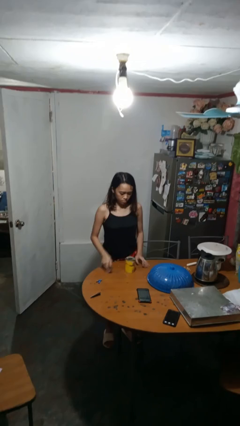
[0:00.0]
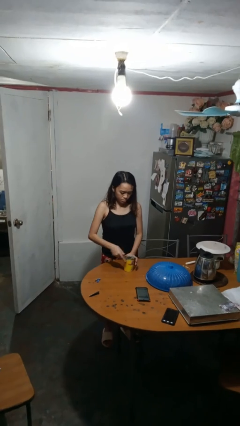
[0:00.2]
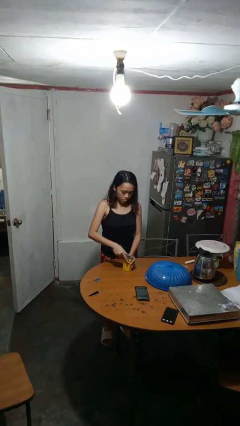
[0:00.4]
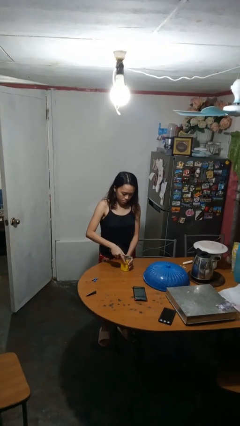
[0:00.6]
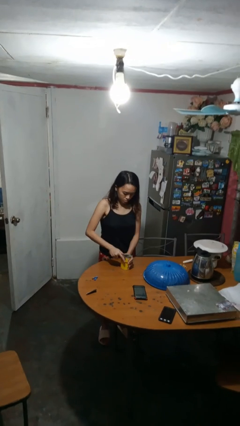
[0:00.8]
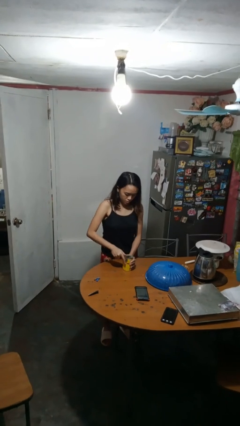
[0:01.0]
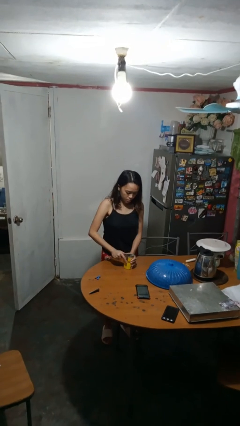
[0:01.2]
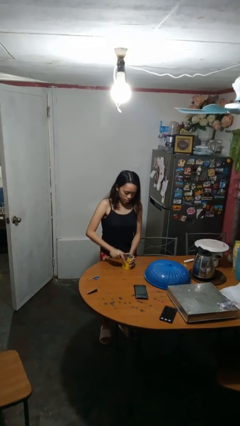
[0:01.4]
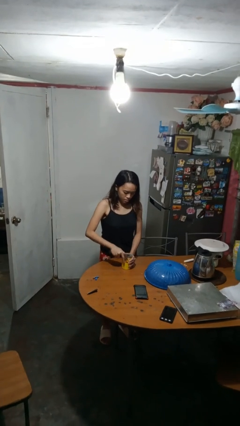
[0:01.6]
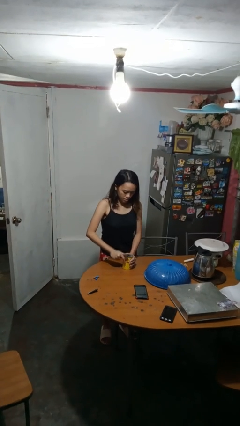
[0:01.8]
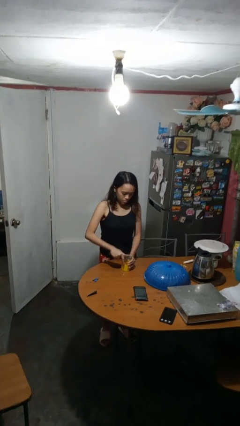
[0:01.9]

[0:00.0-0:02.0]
person opens can with can opener

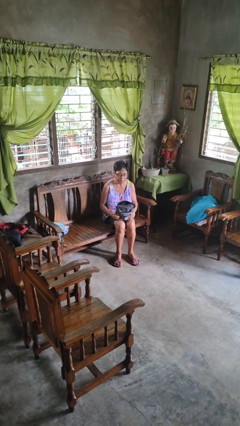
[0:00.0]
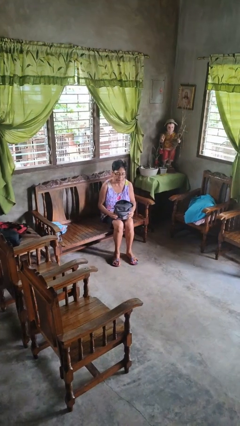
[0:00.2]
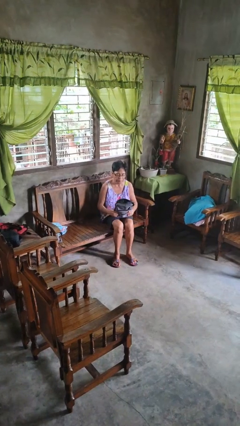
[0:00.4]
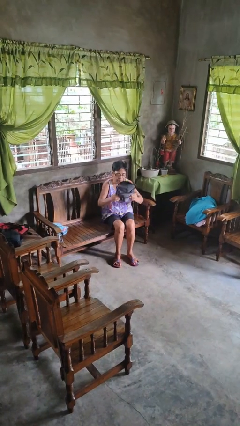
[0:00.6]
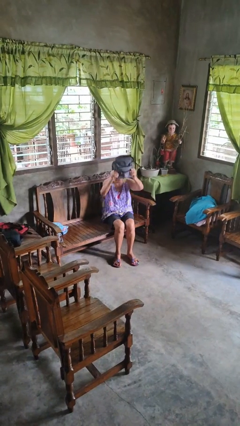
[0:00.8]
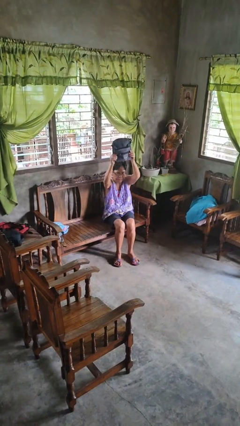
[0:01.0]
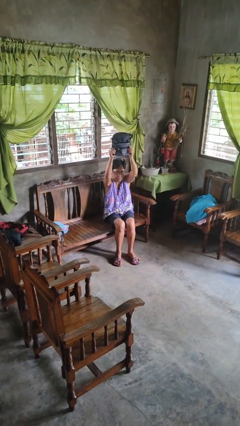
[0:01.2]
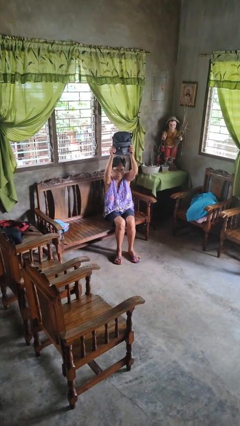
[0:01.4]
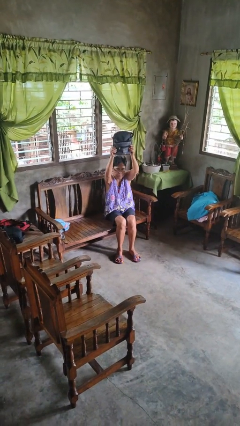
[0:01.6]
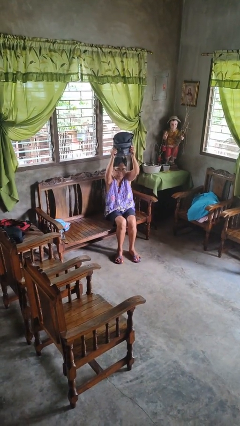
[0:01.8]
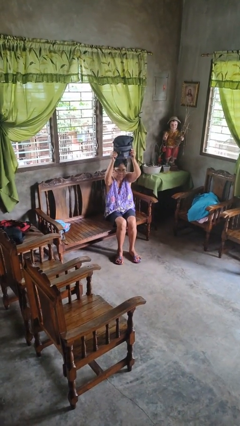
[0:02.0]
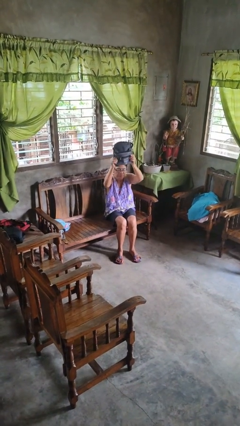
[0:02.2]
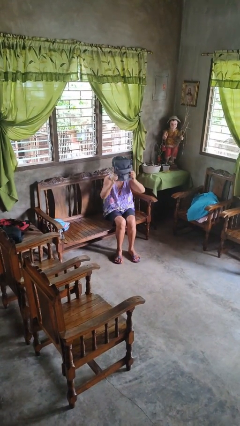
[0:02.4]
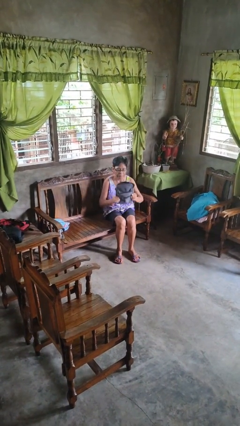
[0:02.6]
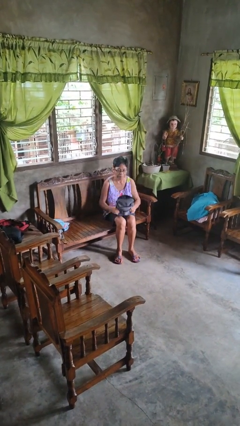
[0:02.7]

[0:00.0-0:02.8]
person holds object above head

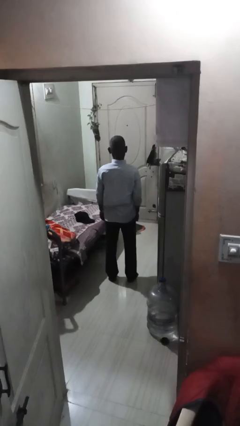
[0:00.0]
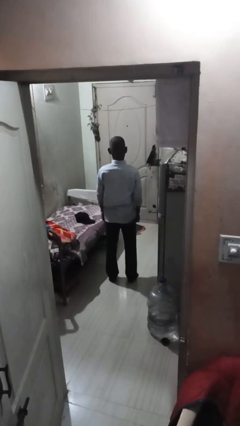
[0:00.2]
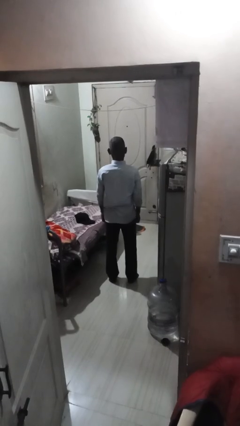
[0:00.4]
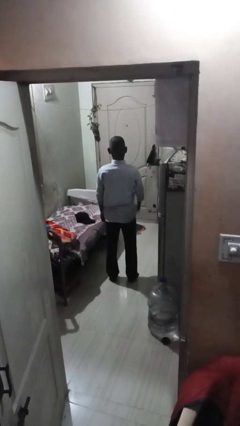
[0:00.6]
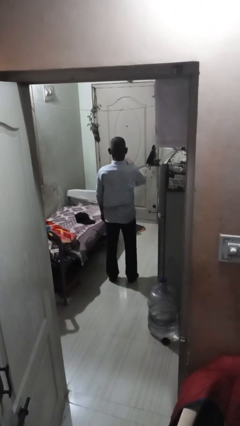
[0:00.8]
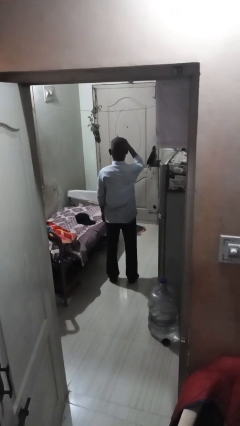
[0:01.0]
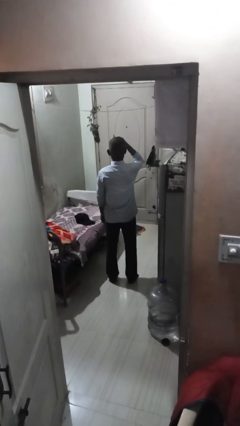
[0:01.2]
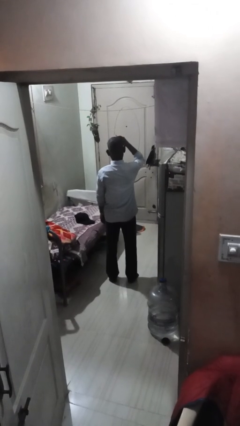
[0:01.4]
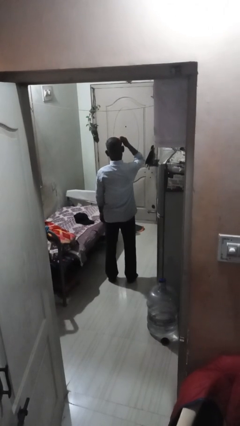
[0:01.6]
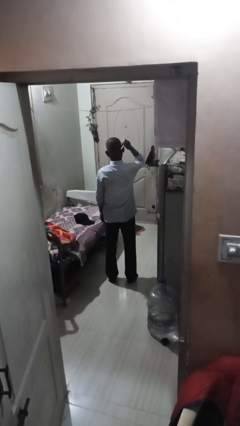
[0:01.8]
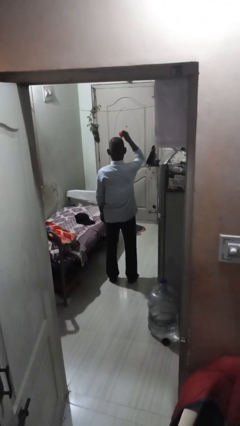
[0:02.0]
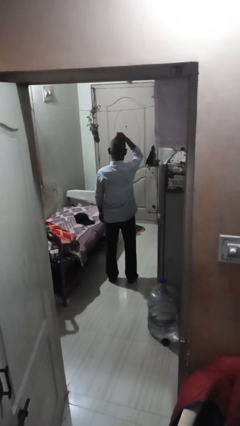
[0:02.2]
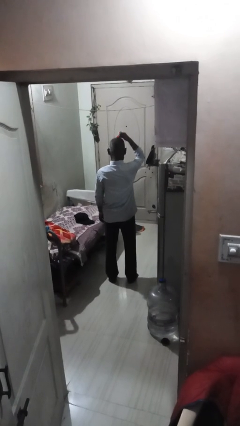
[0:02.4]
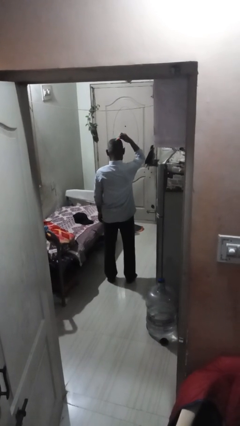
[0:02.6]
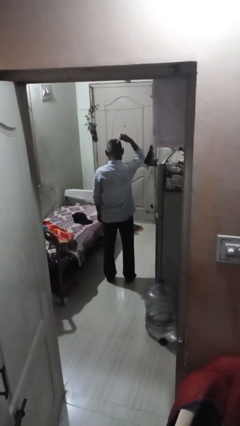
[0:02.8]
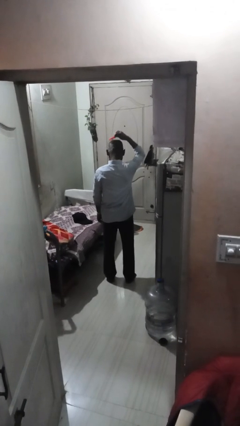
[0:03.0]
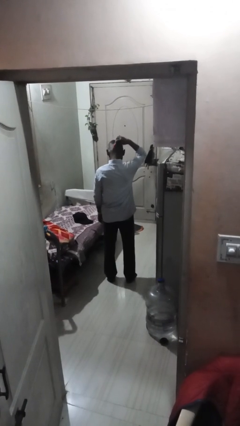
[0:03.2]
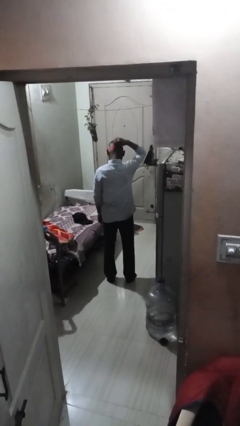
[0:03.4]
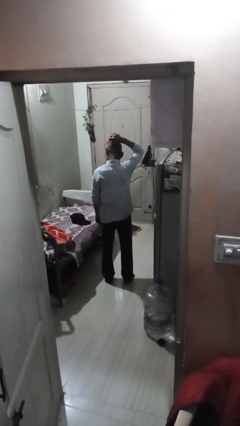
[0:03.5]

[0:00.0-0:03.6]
person brushes hair

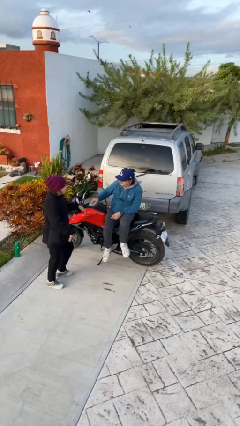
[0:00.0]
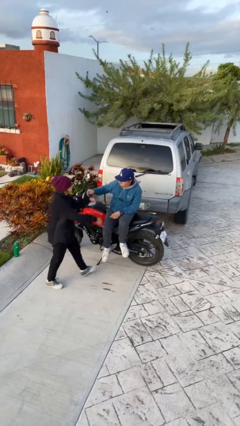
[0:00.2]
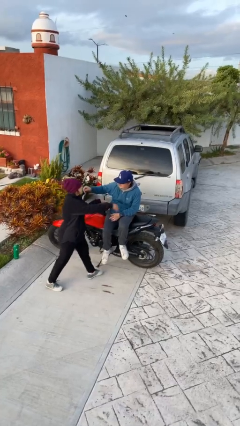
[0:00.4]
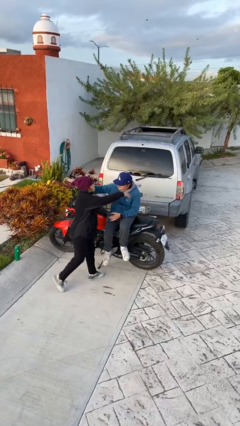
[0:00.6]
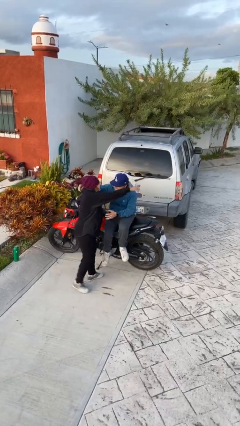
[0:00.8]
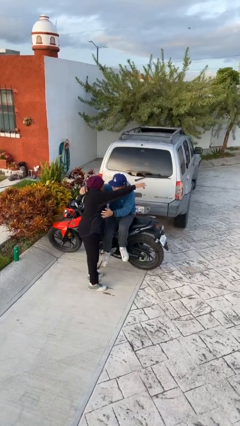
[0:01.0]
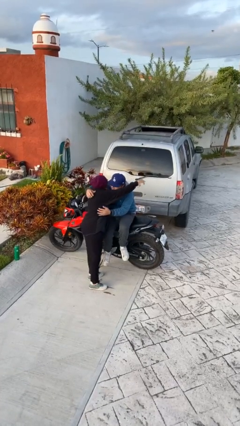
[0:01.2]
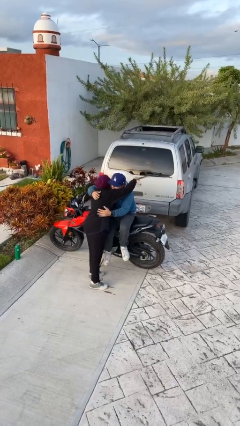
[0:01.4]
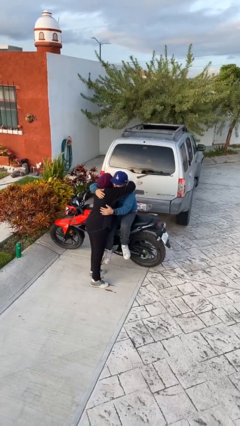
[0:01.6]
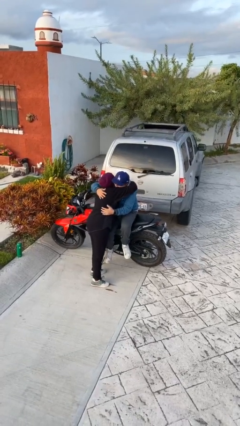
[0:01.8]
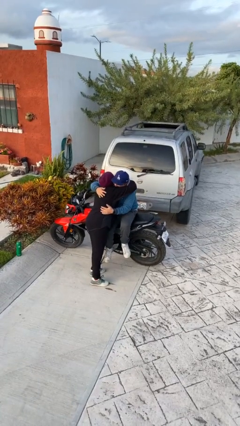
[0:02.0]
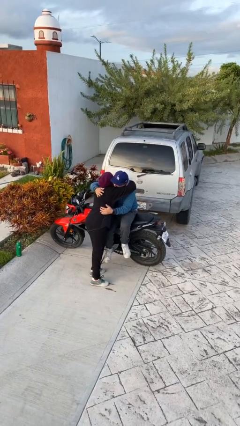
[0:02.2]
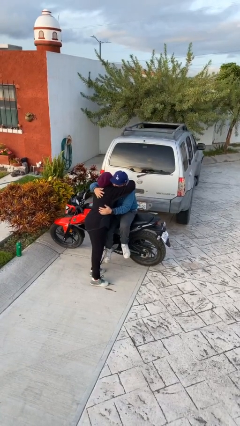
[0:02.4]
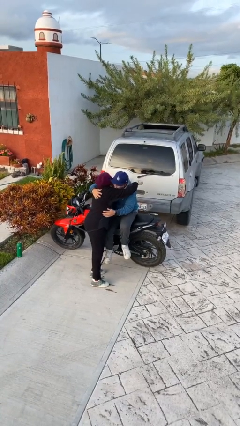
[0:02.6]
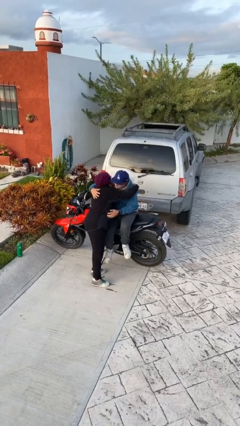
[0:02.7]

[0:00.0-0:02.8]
person embraces person

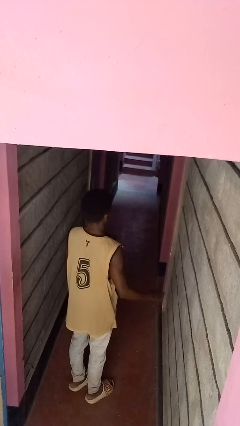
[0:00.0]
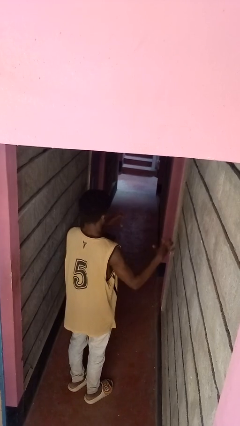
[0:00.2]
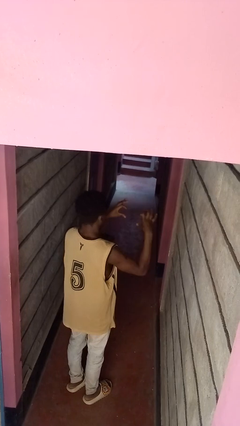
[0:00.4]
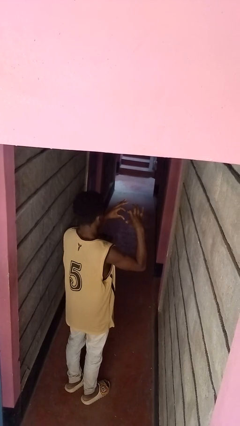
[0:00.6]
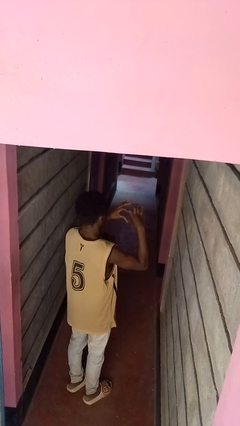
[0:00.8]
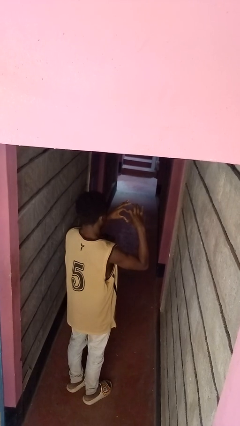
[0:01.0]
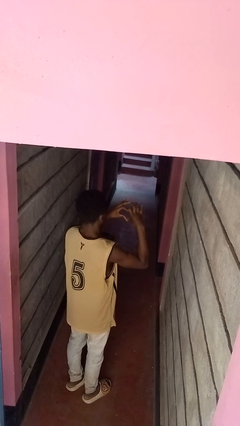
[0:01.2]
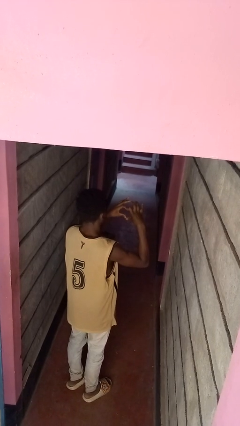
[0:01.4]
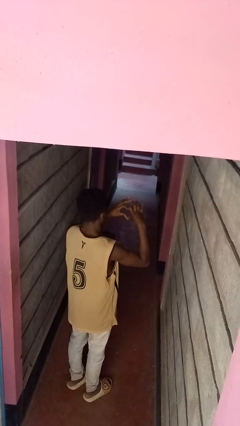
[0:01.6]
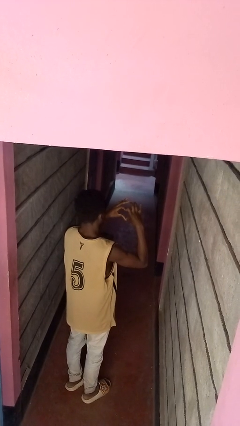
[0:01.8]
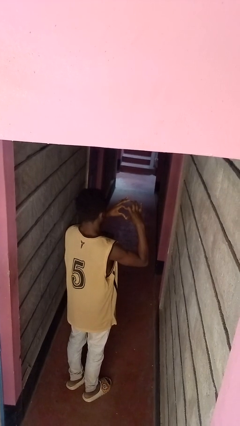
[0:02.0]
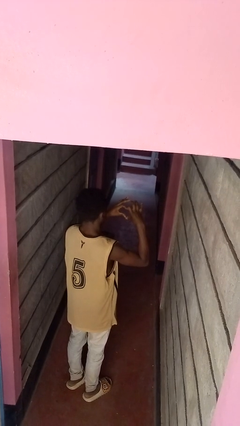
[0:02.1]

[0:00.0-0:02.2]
person gestures heart

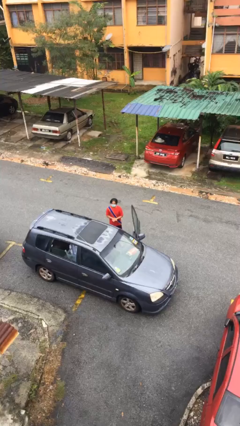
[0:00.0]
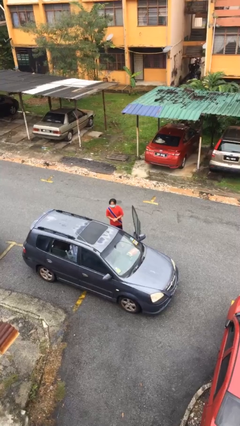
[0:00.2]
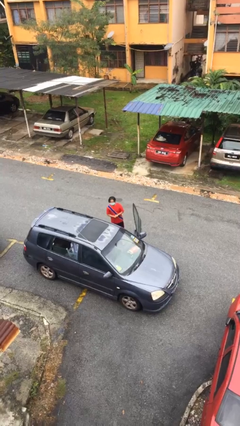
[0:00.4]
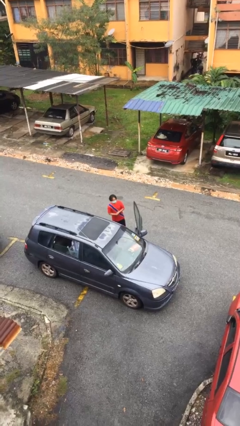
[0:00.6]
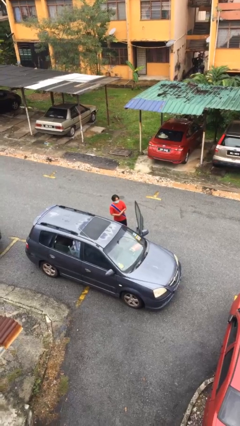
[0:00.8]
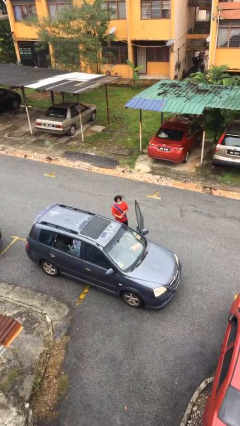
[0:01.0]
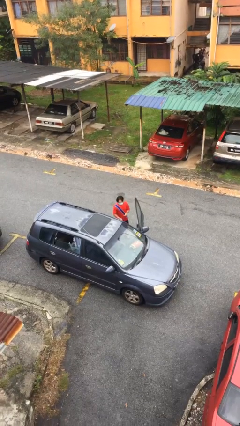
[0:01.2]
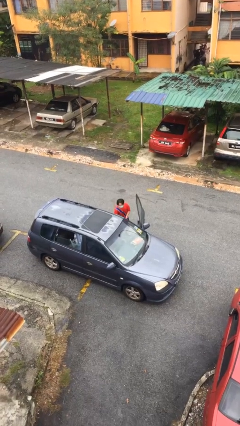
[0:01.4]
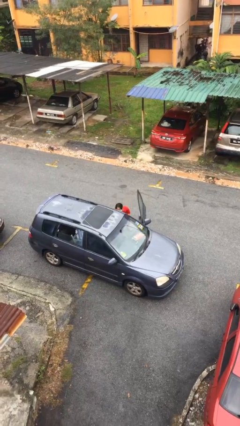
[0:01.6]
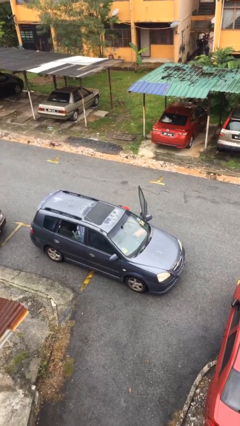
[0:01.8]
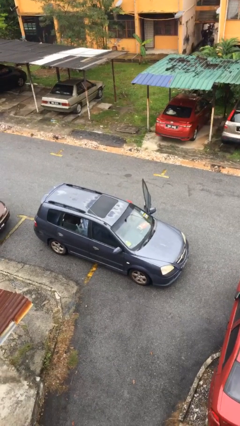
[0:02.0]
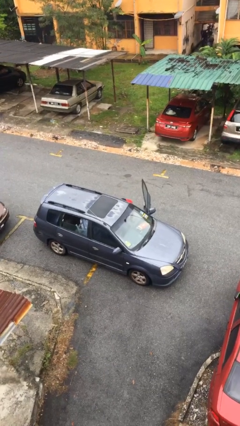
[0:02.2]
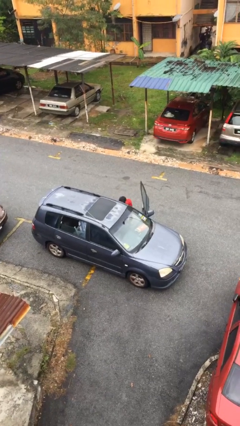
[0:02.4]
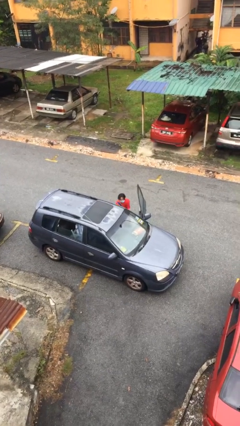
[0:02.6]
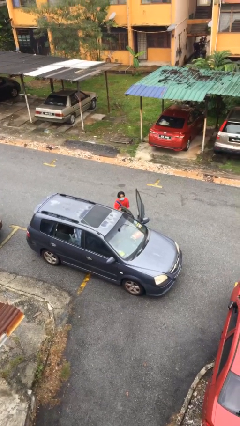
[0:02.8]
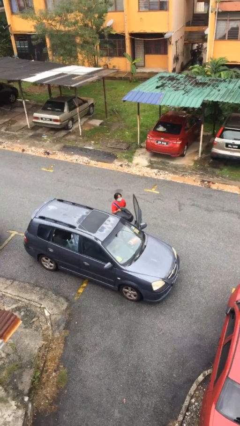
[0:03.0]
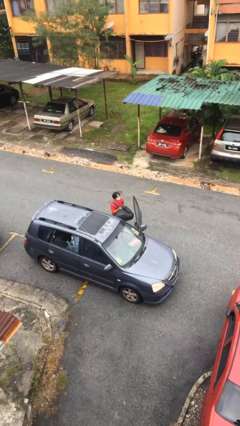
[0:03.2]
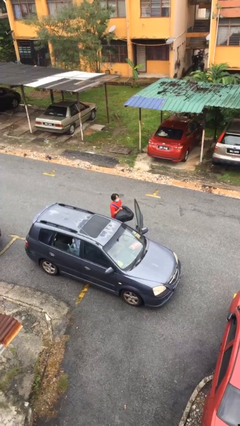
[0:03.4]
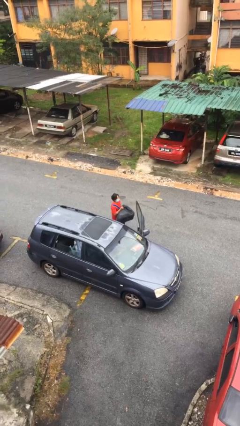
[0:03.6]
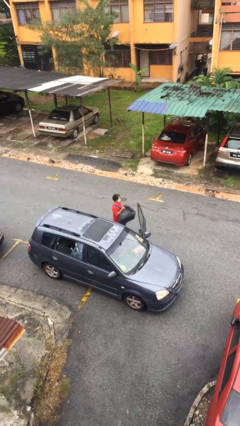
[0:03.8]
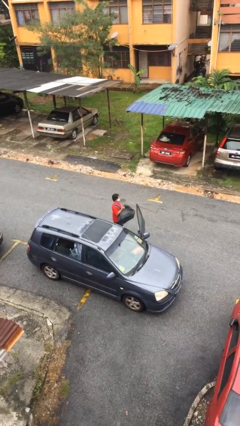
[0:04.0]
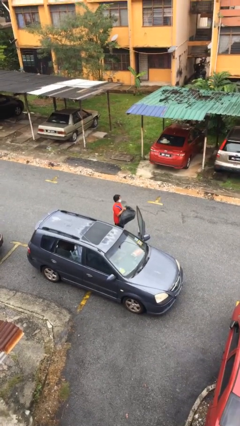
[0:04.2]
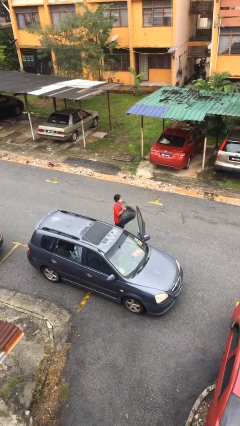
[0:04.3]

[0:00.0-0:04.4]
person unloads car
